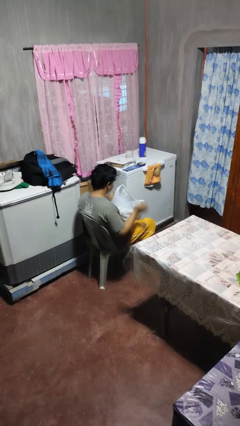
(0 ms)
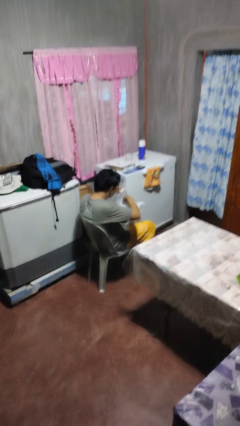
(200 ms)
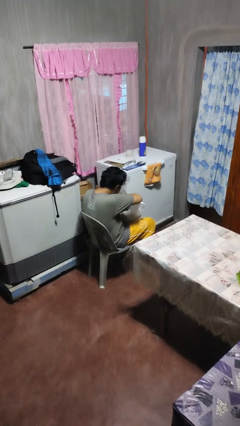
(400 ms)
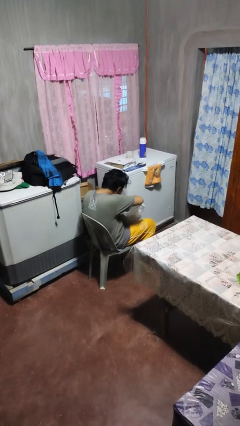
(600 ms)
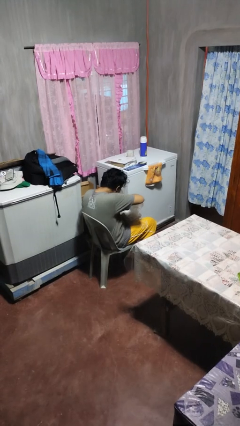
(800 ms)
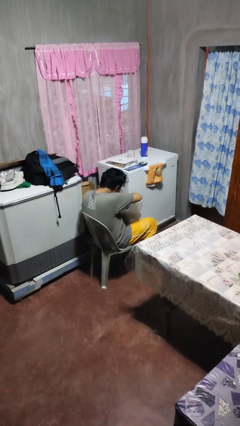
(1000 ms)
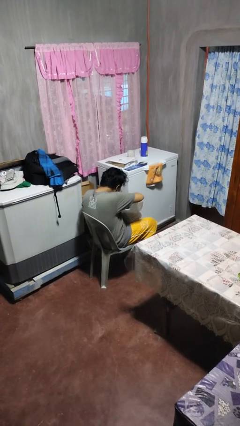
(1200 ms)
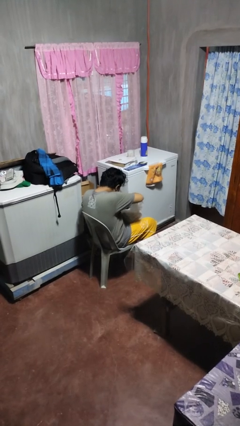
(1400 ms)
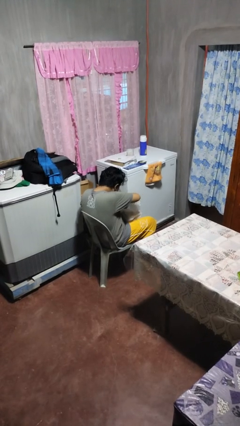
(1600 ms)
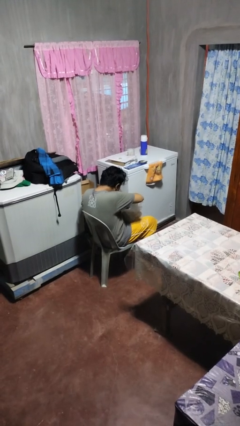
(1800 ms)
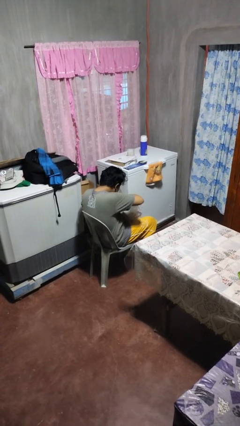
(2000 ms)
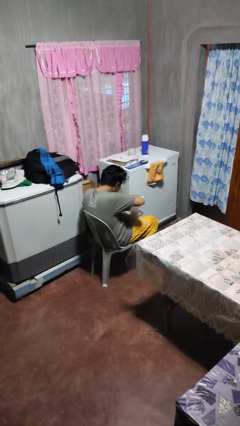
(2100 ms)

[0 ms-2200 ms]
person searches in bag

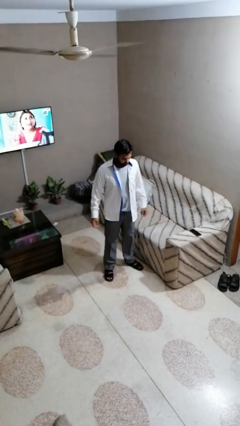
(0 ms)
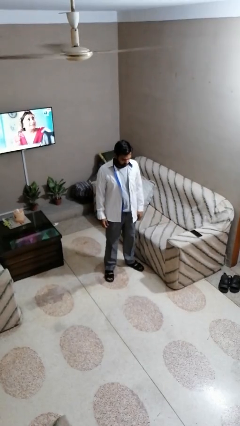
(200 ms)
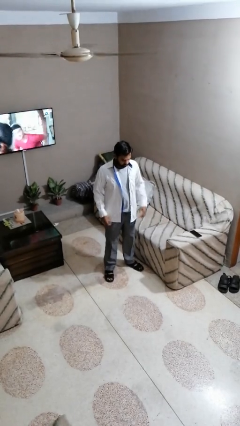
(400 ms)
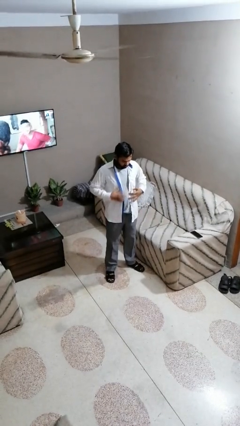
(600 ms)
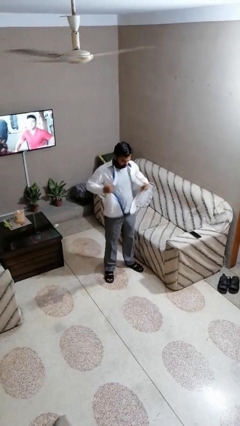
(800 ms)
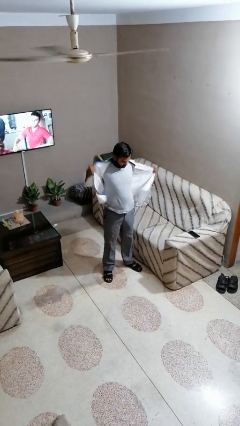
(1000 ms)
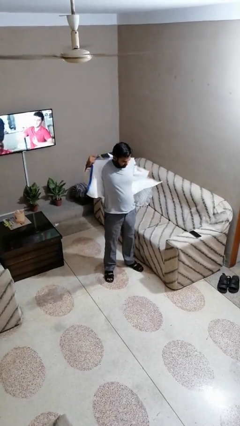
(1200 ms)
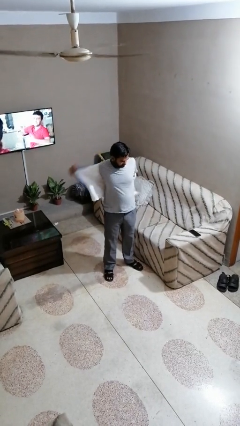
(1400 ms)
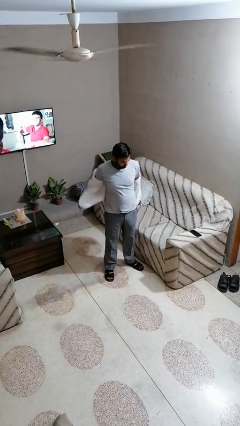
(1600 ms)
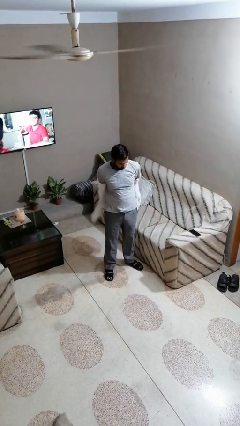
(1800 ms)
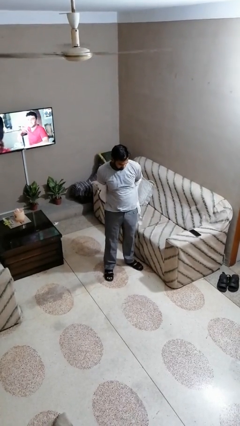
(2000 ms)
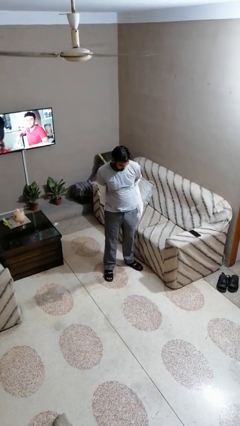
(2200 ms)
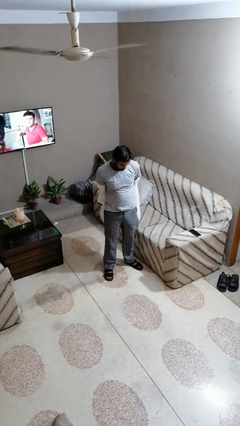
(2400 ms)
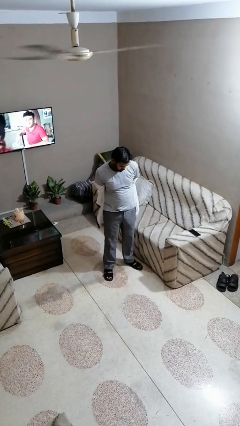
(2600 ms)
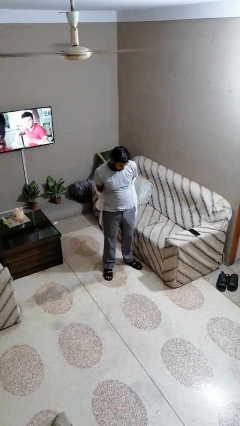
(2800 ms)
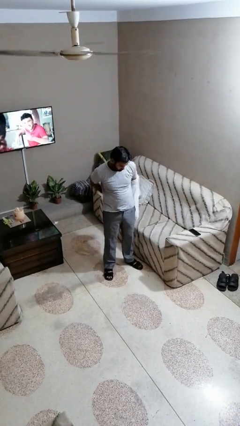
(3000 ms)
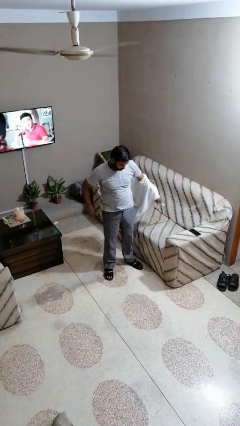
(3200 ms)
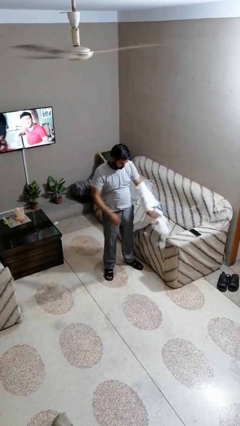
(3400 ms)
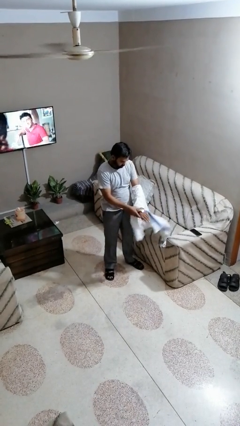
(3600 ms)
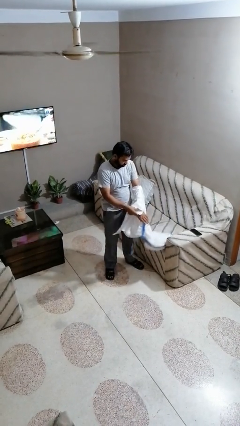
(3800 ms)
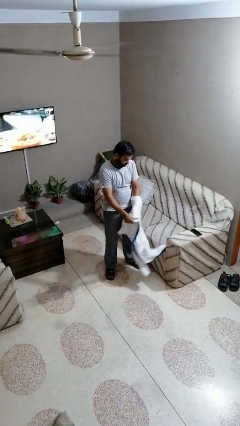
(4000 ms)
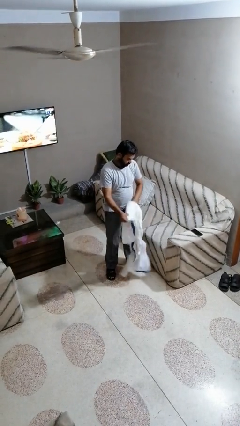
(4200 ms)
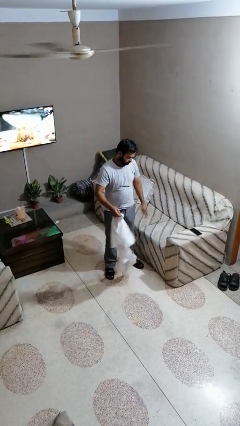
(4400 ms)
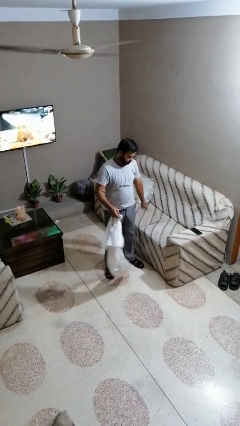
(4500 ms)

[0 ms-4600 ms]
person takes off shirt

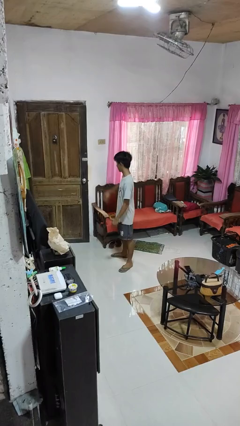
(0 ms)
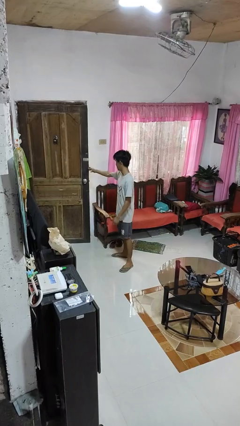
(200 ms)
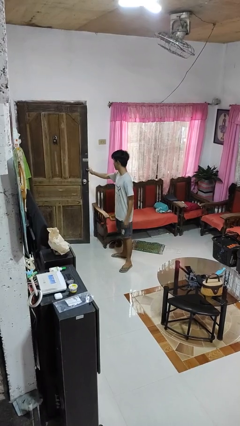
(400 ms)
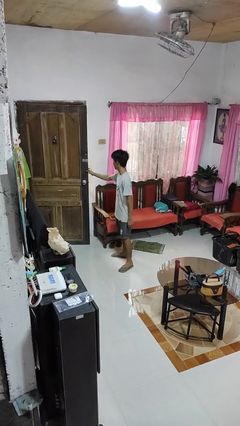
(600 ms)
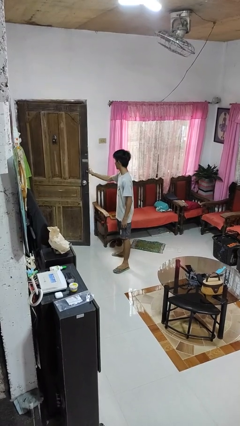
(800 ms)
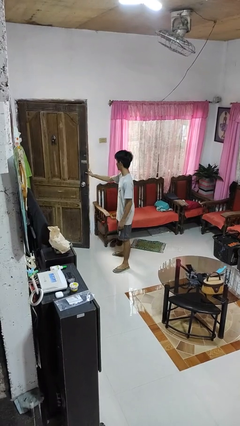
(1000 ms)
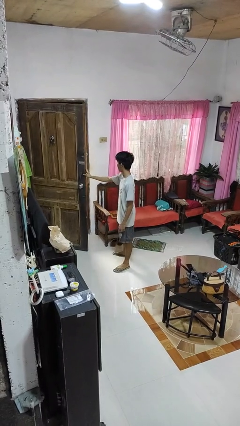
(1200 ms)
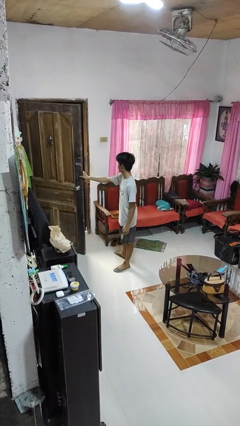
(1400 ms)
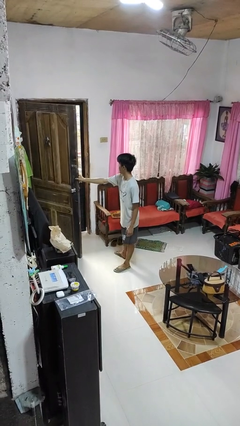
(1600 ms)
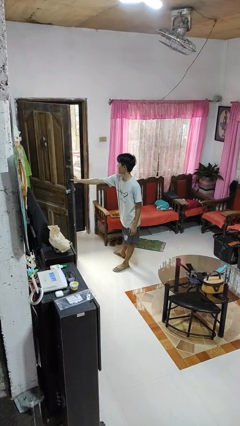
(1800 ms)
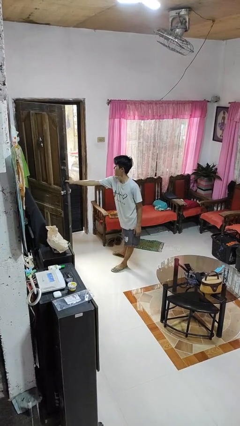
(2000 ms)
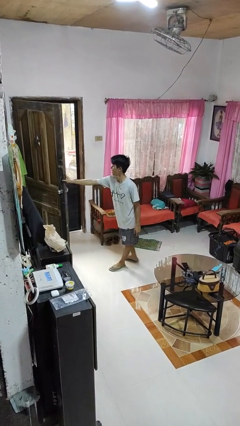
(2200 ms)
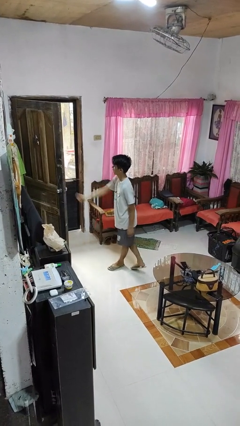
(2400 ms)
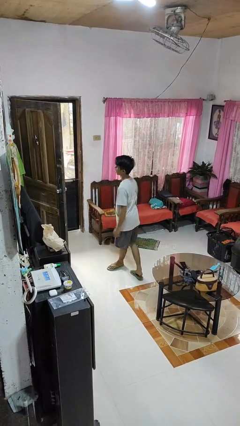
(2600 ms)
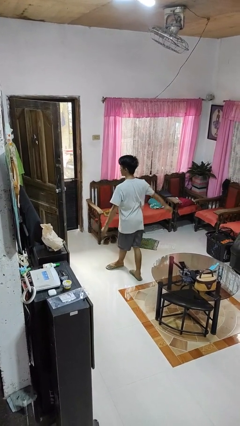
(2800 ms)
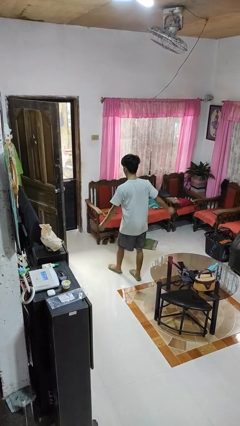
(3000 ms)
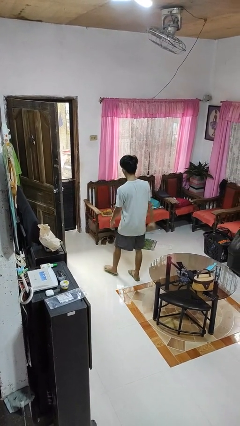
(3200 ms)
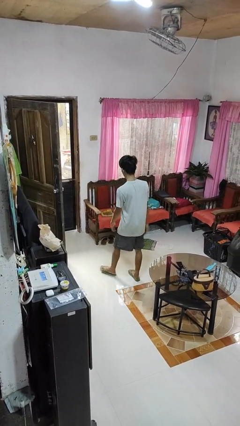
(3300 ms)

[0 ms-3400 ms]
person opens facility door

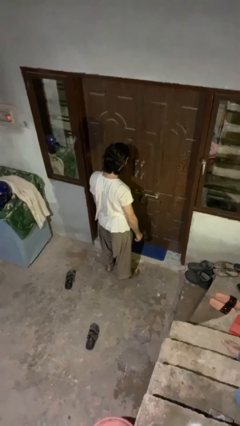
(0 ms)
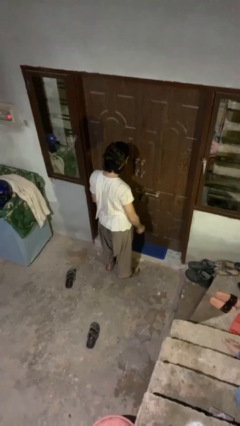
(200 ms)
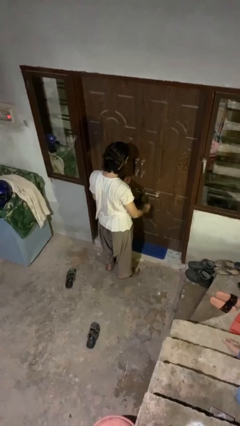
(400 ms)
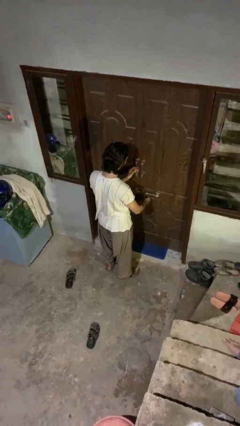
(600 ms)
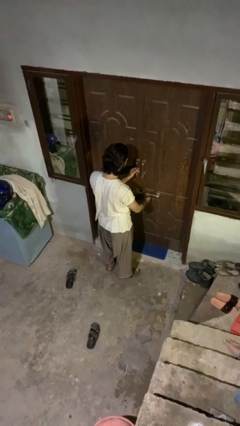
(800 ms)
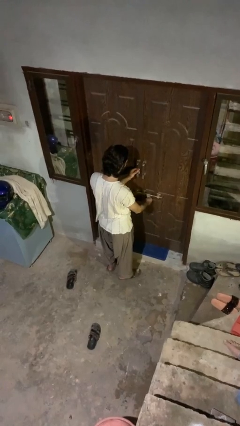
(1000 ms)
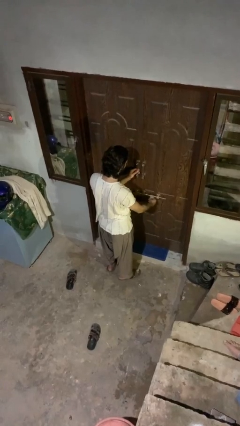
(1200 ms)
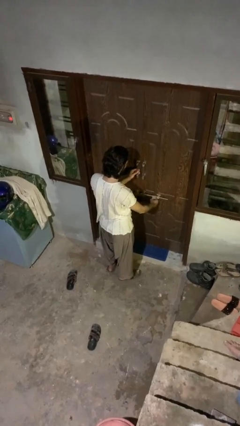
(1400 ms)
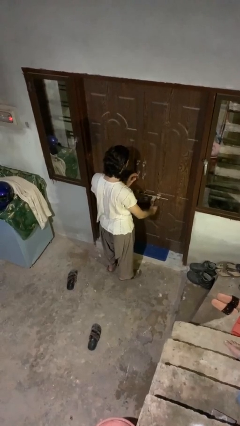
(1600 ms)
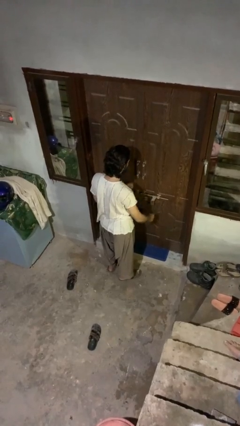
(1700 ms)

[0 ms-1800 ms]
person unlocks door with keys

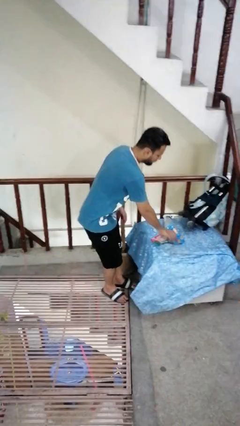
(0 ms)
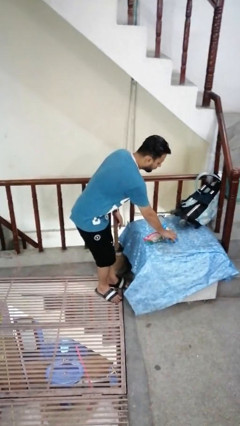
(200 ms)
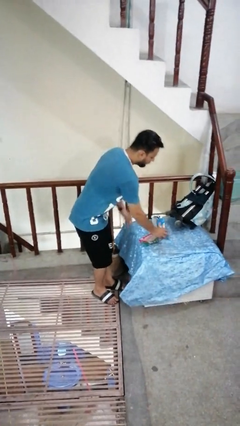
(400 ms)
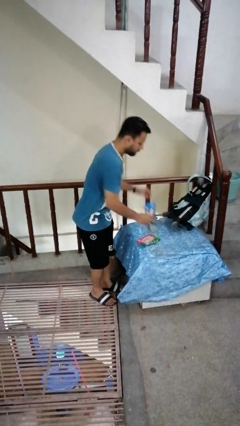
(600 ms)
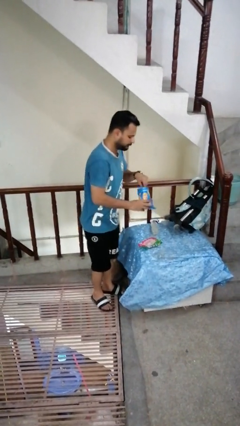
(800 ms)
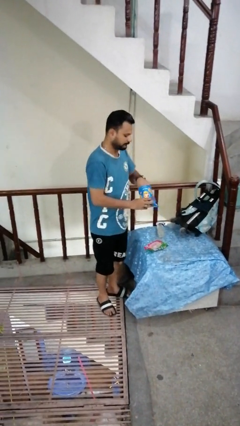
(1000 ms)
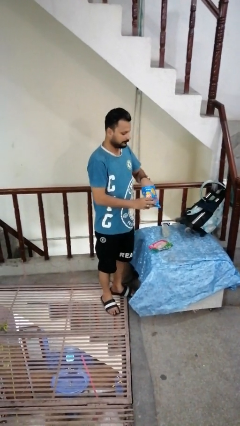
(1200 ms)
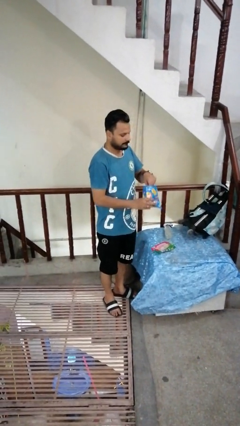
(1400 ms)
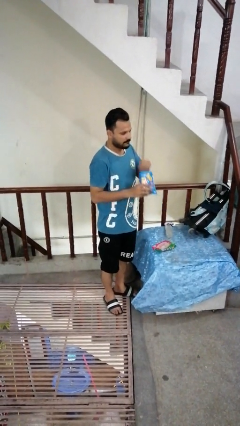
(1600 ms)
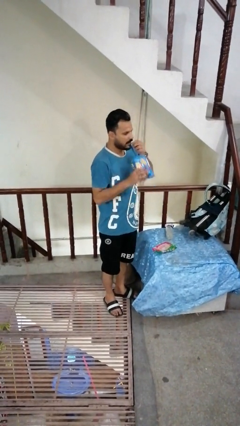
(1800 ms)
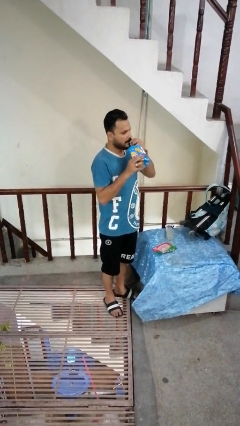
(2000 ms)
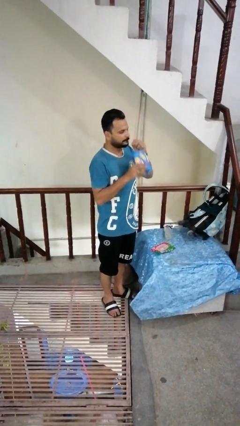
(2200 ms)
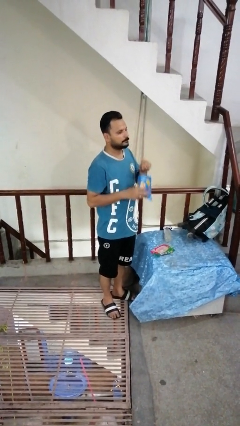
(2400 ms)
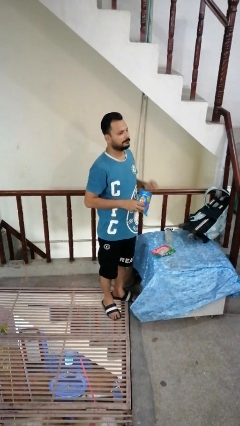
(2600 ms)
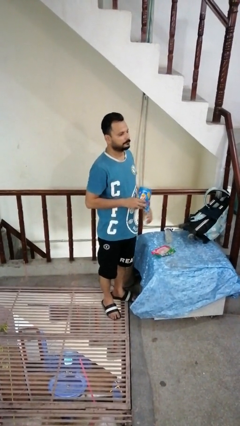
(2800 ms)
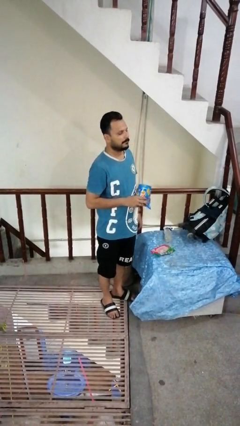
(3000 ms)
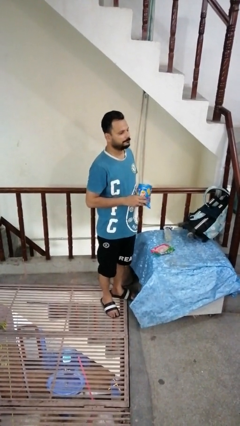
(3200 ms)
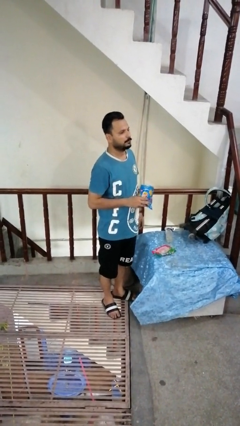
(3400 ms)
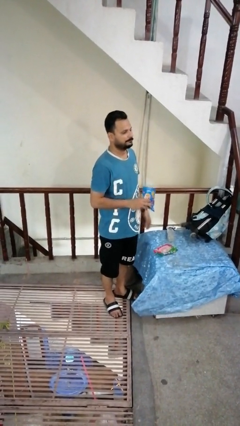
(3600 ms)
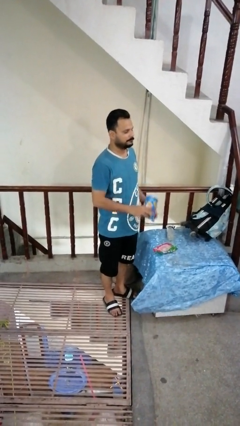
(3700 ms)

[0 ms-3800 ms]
person eats snack from bag

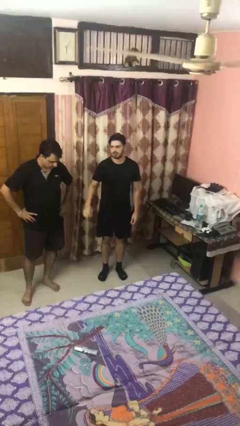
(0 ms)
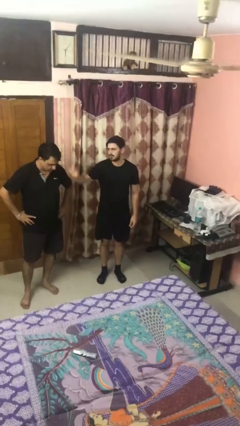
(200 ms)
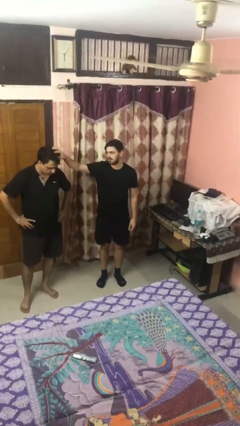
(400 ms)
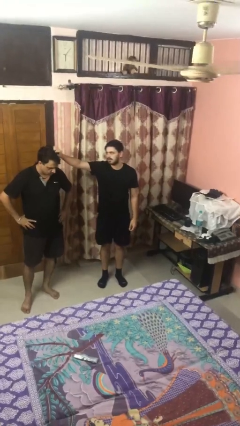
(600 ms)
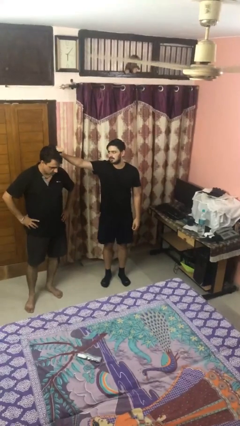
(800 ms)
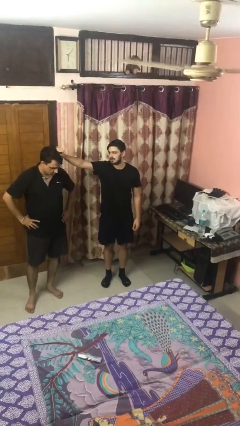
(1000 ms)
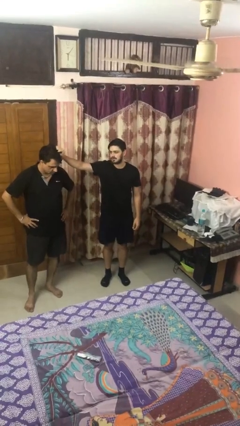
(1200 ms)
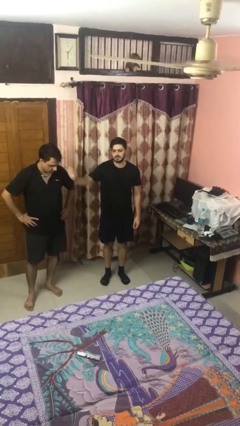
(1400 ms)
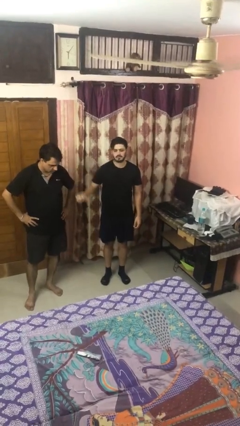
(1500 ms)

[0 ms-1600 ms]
person grabs person by hair
